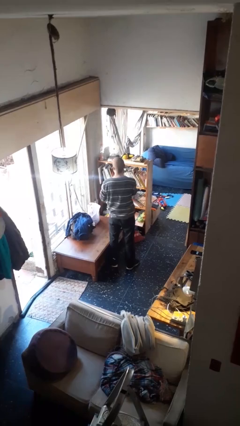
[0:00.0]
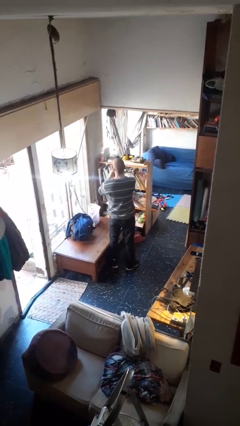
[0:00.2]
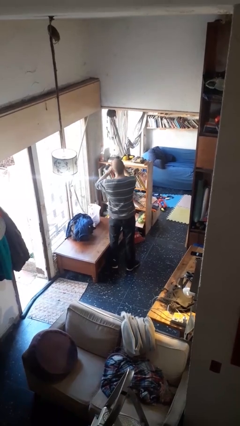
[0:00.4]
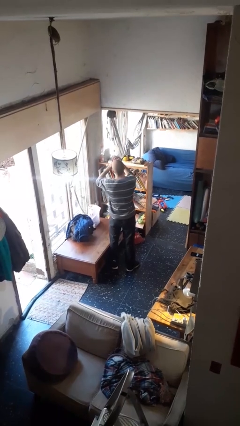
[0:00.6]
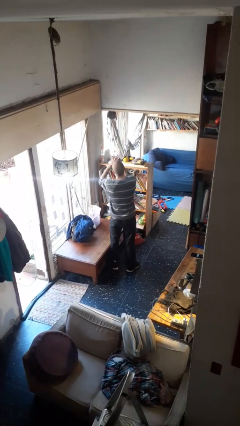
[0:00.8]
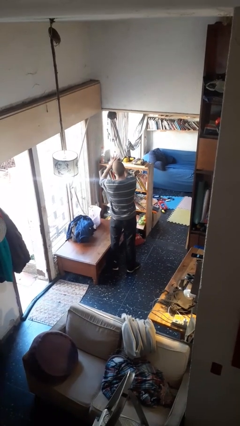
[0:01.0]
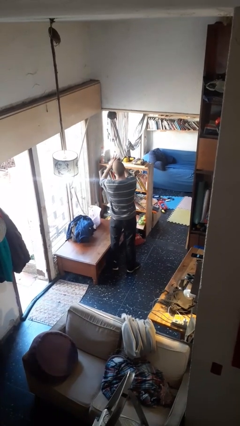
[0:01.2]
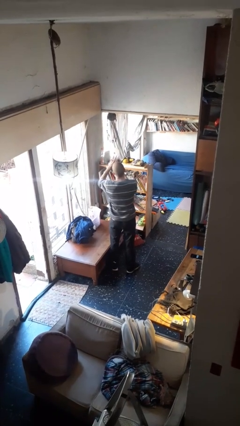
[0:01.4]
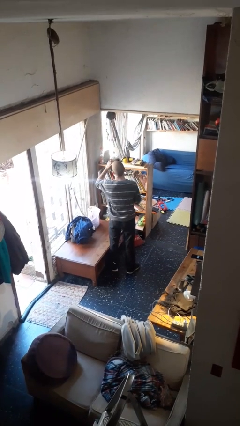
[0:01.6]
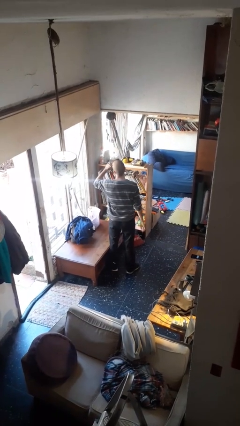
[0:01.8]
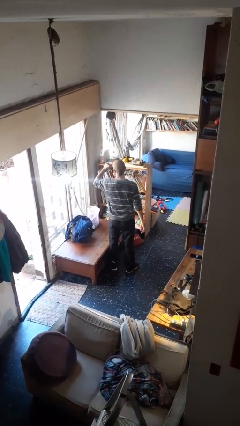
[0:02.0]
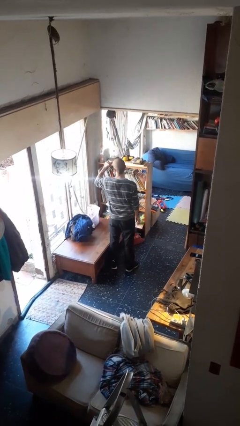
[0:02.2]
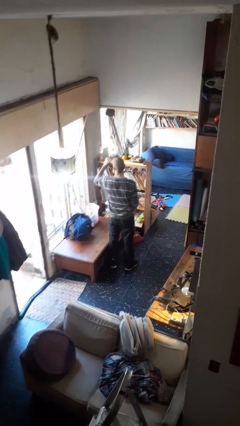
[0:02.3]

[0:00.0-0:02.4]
person puts on ring

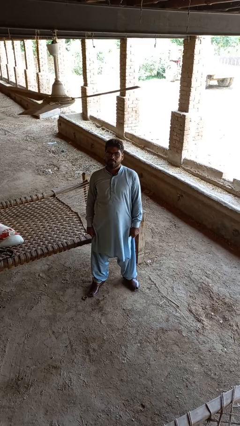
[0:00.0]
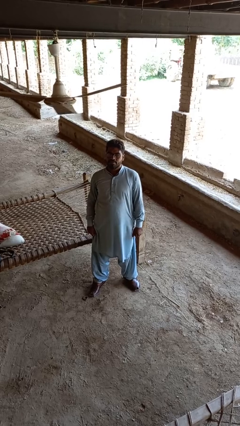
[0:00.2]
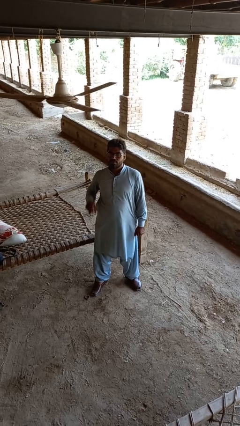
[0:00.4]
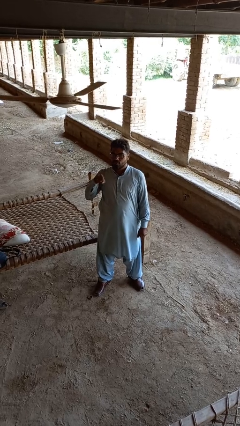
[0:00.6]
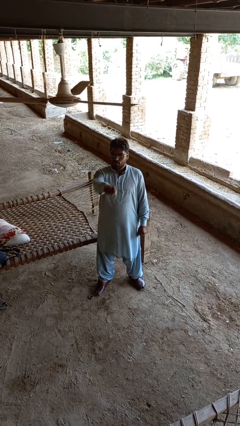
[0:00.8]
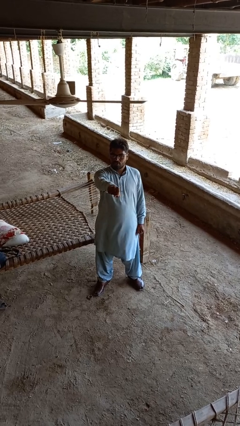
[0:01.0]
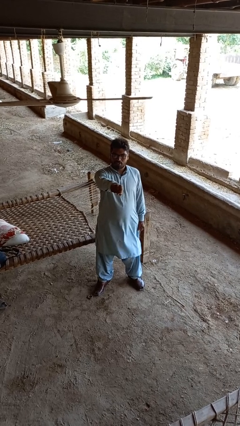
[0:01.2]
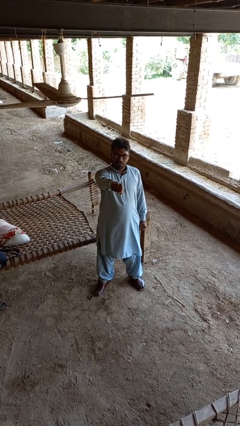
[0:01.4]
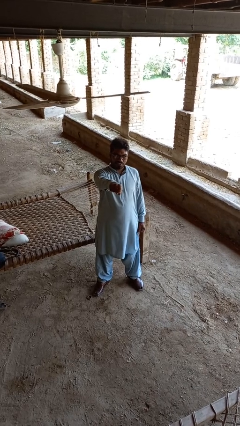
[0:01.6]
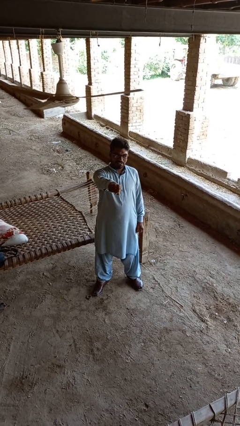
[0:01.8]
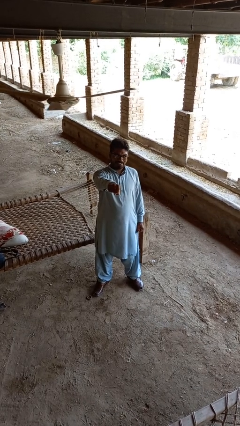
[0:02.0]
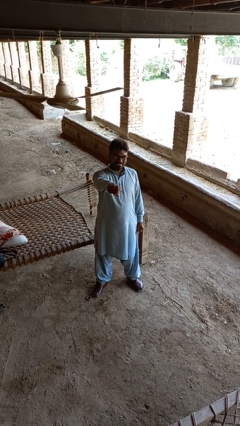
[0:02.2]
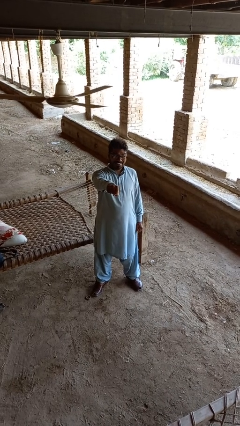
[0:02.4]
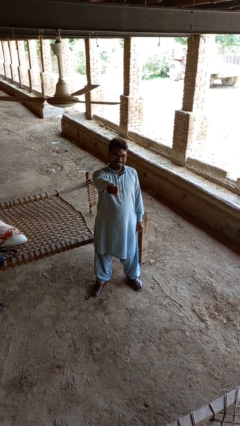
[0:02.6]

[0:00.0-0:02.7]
person punches

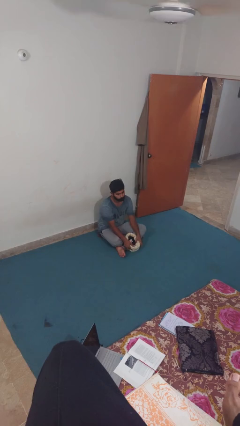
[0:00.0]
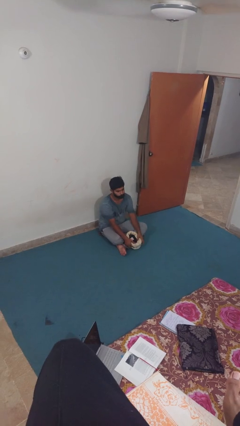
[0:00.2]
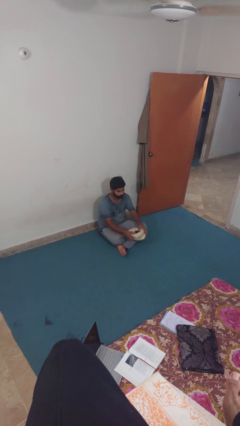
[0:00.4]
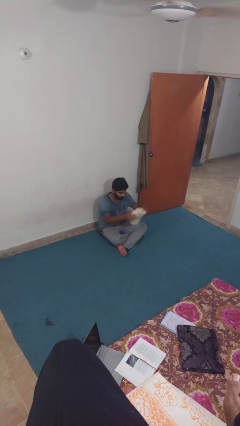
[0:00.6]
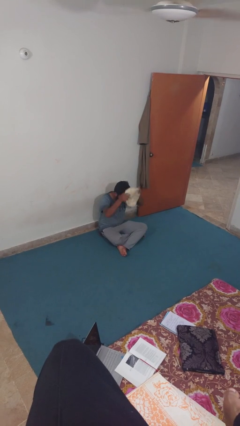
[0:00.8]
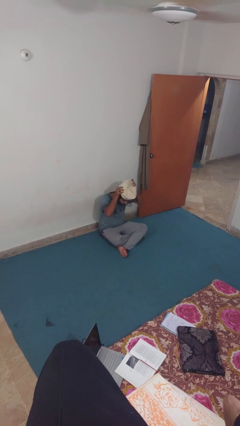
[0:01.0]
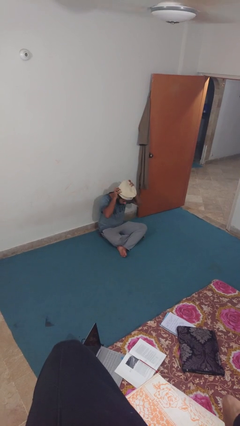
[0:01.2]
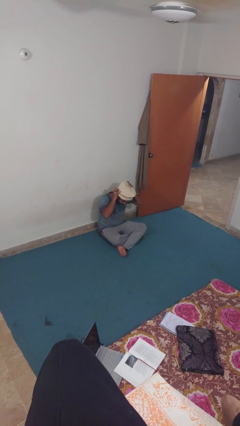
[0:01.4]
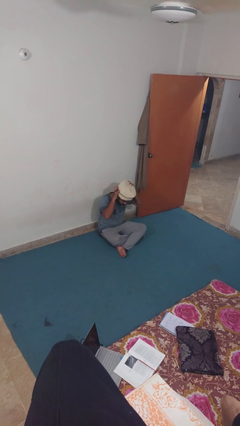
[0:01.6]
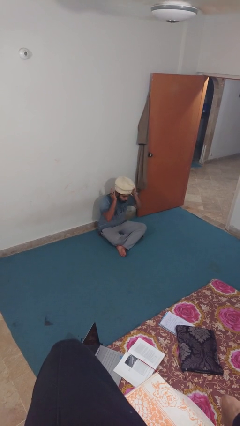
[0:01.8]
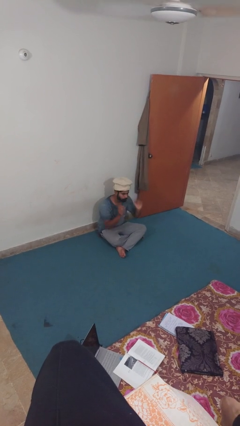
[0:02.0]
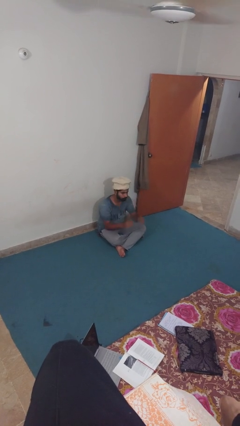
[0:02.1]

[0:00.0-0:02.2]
person puts on hat

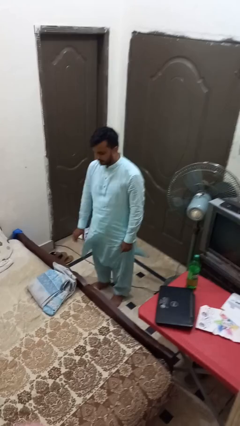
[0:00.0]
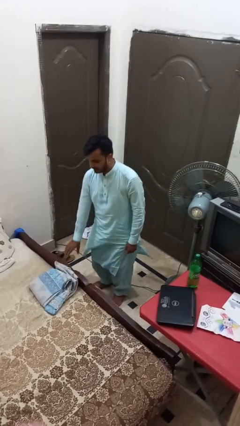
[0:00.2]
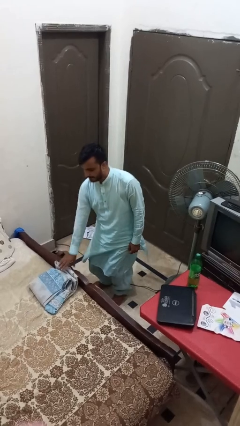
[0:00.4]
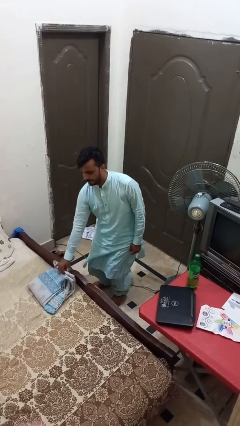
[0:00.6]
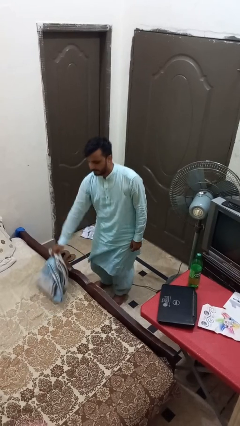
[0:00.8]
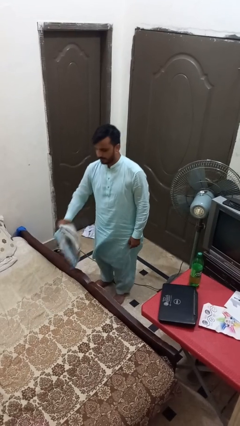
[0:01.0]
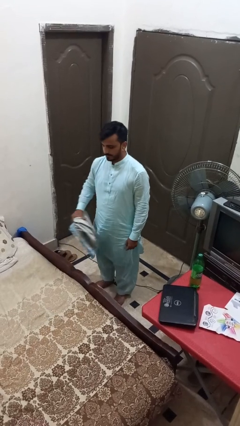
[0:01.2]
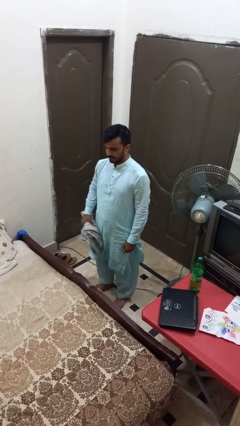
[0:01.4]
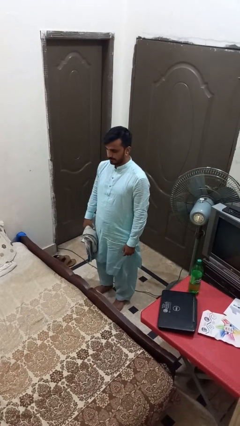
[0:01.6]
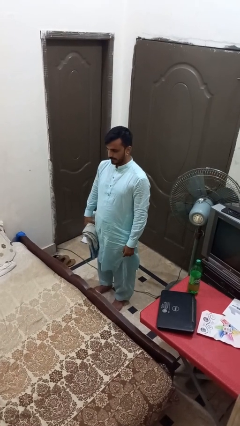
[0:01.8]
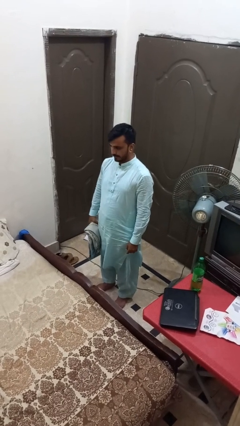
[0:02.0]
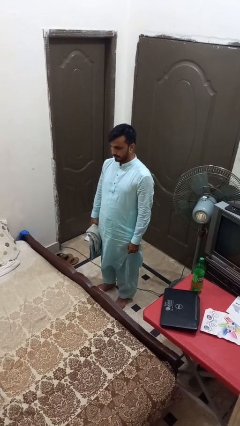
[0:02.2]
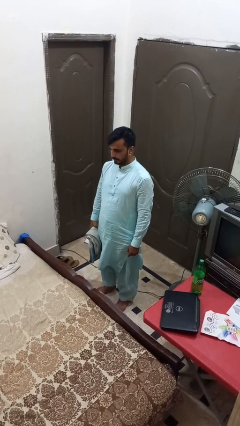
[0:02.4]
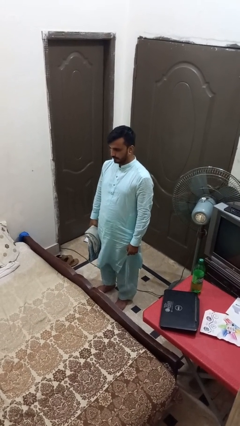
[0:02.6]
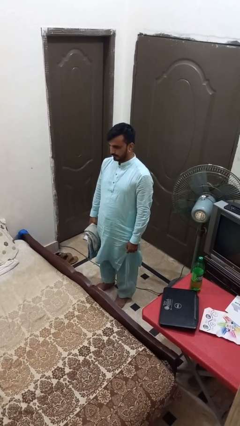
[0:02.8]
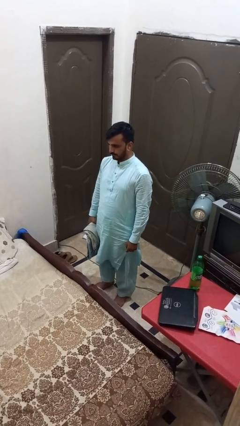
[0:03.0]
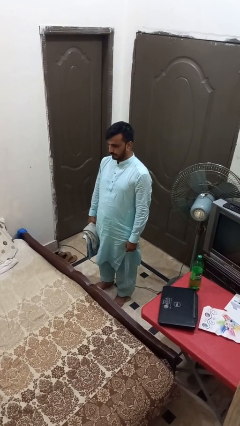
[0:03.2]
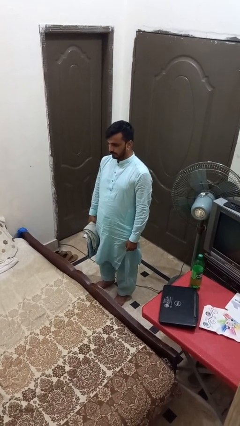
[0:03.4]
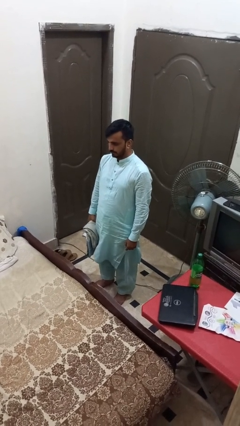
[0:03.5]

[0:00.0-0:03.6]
person picks up object from bed

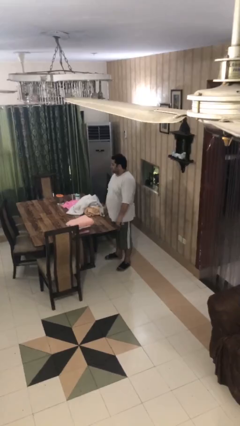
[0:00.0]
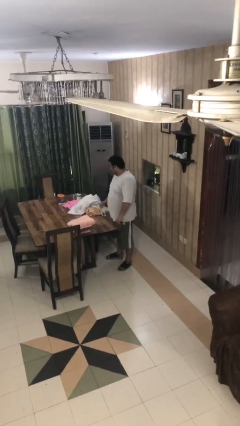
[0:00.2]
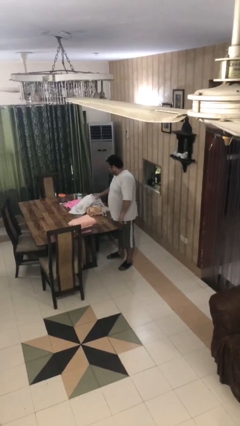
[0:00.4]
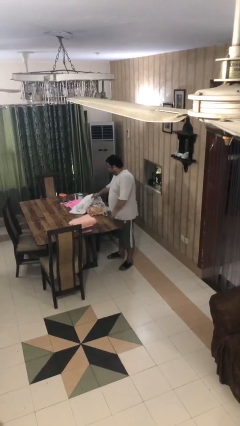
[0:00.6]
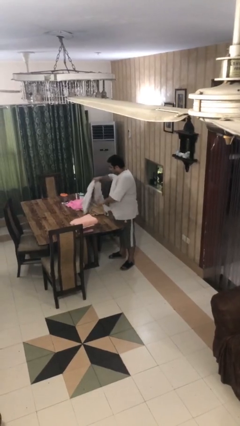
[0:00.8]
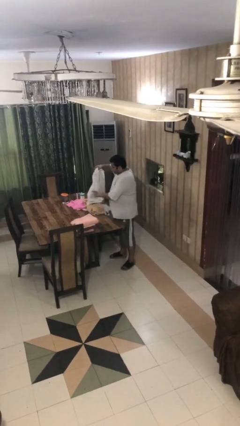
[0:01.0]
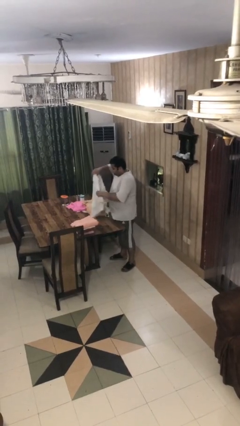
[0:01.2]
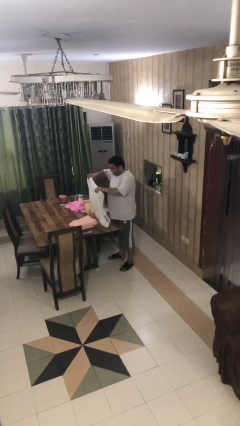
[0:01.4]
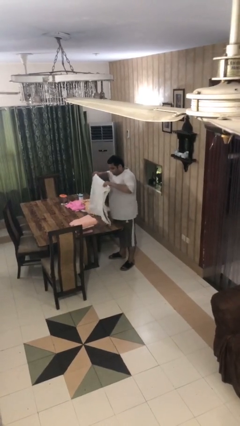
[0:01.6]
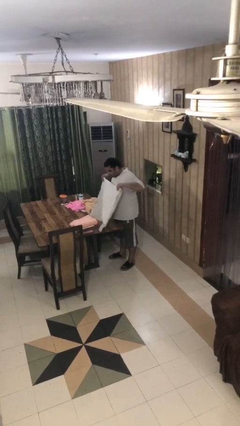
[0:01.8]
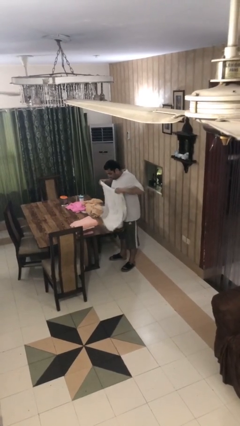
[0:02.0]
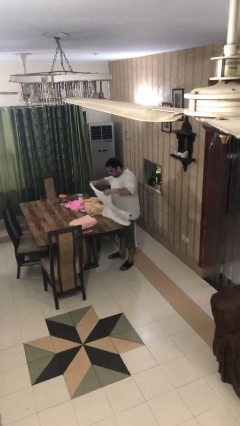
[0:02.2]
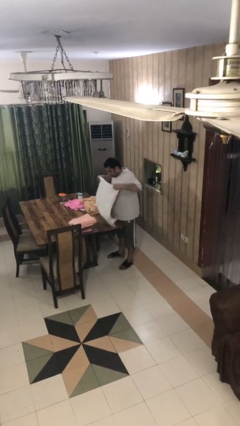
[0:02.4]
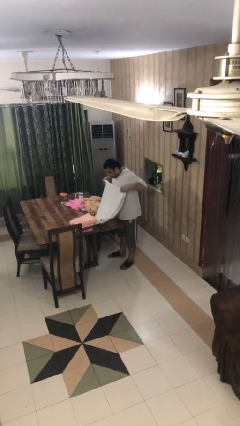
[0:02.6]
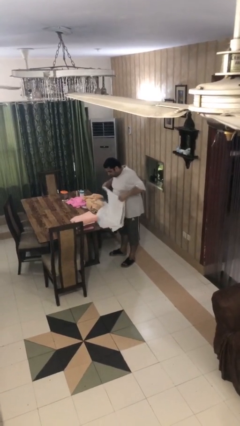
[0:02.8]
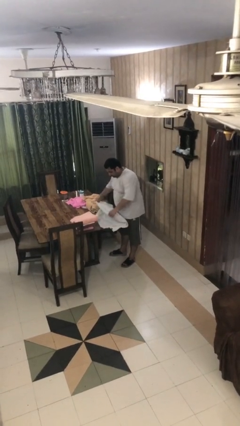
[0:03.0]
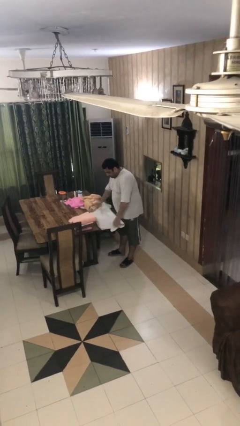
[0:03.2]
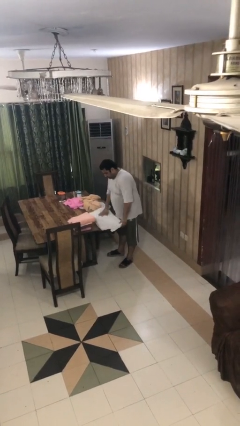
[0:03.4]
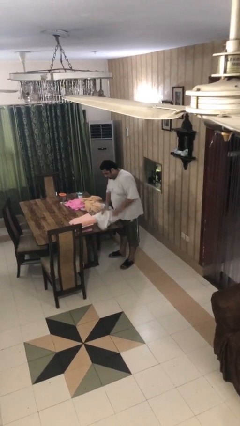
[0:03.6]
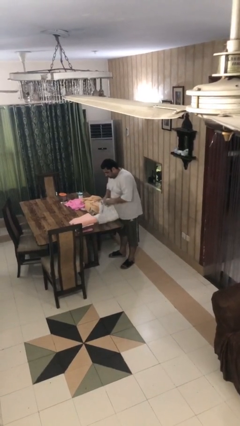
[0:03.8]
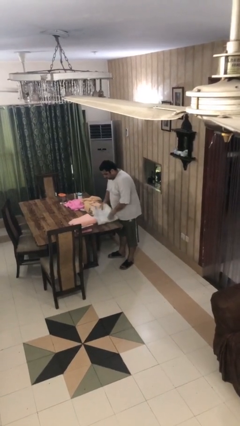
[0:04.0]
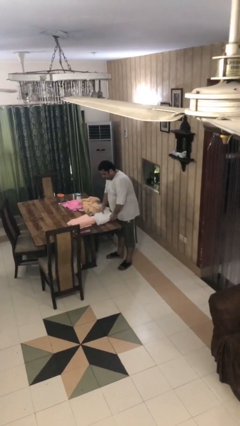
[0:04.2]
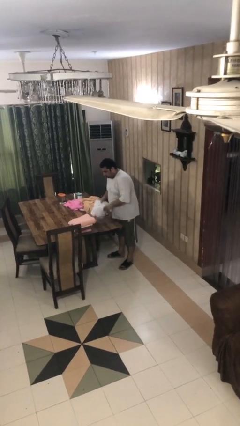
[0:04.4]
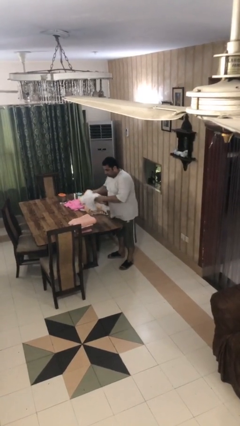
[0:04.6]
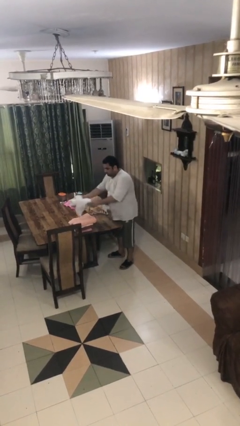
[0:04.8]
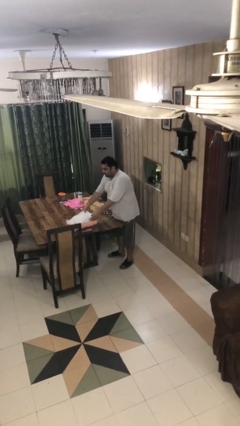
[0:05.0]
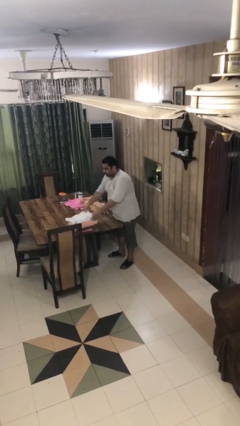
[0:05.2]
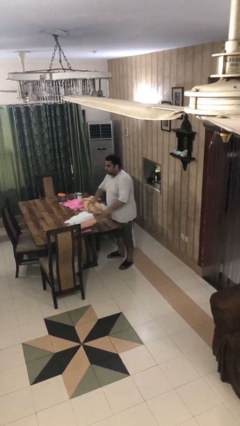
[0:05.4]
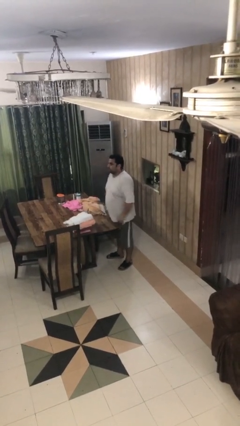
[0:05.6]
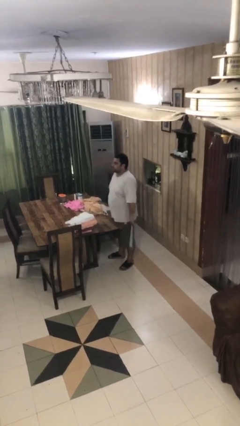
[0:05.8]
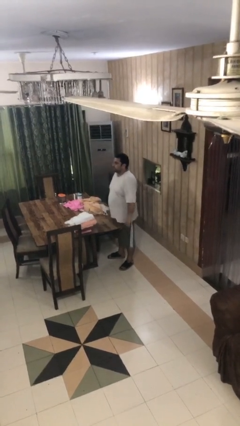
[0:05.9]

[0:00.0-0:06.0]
person folds towel

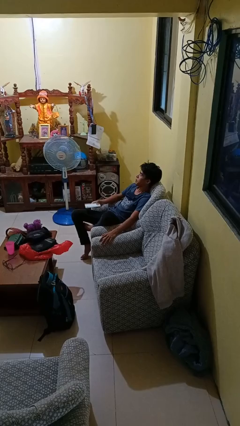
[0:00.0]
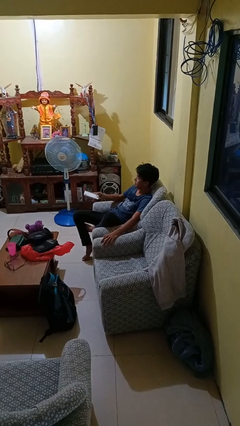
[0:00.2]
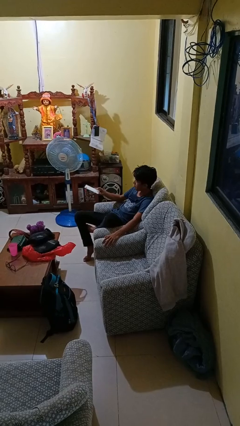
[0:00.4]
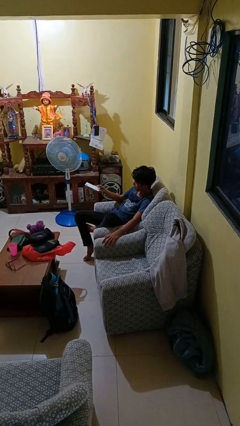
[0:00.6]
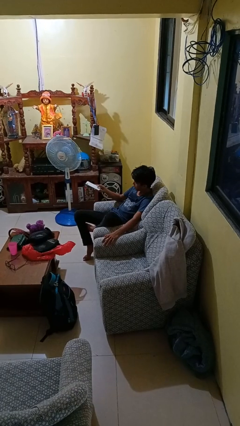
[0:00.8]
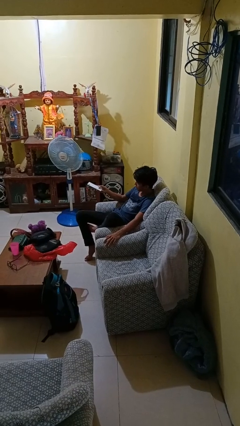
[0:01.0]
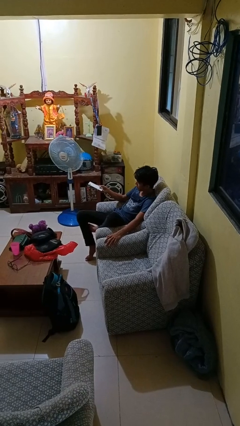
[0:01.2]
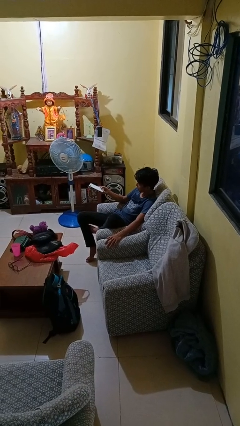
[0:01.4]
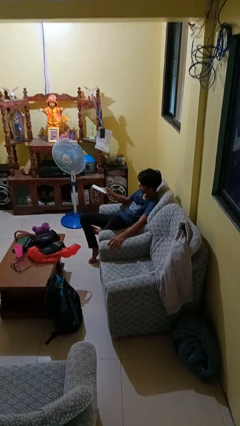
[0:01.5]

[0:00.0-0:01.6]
person uses television remote
